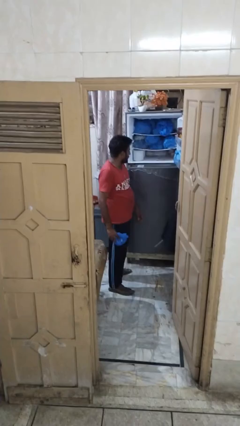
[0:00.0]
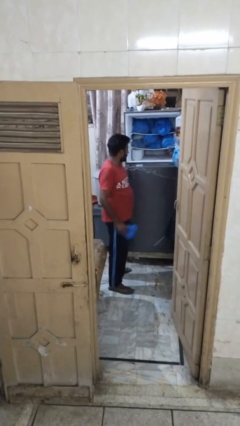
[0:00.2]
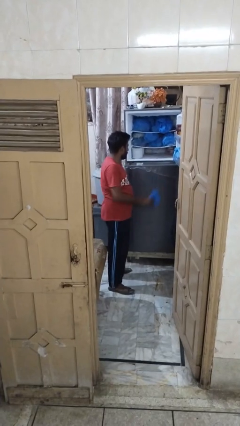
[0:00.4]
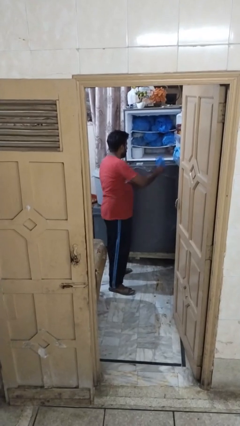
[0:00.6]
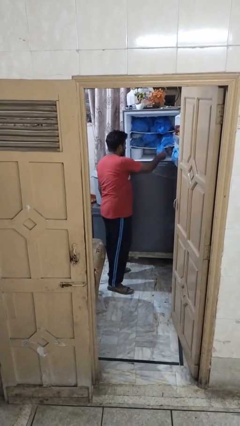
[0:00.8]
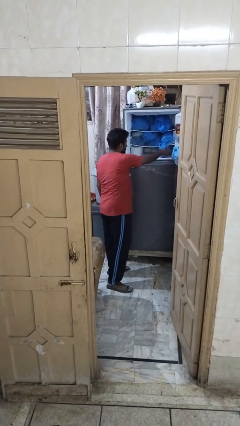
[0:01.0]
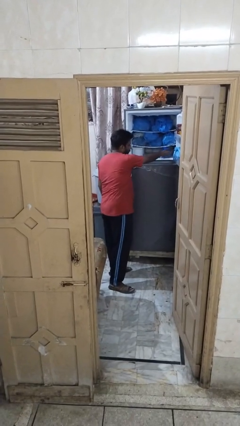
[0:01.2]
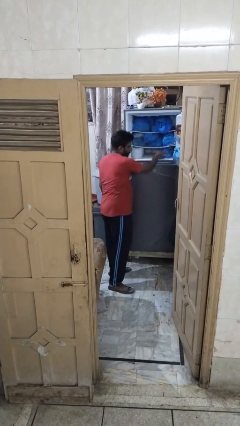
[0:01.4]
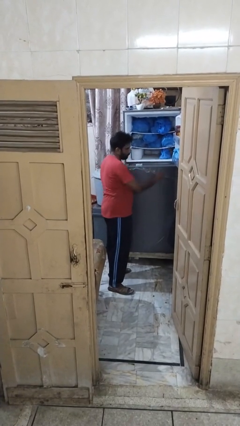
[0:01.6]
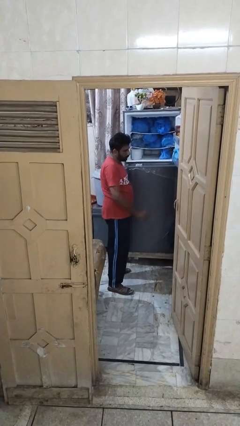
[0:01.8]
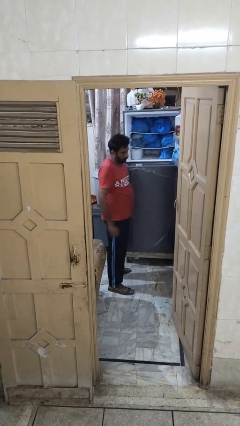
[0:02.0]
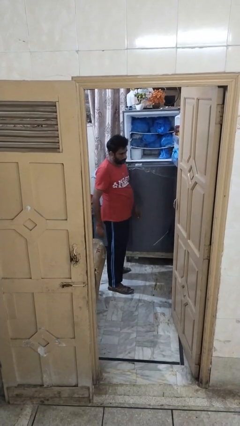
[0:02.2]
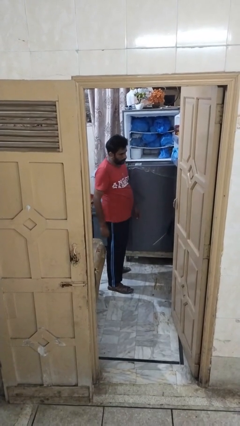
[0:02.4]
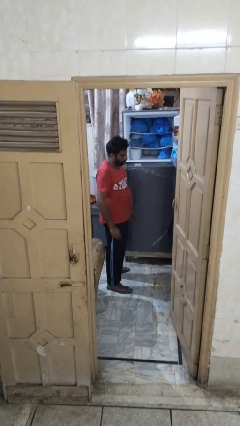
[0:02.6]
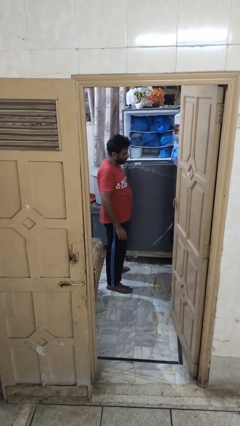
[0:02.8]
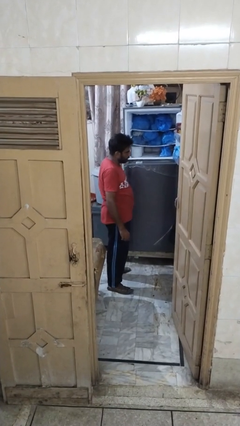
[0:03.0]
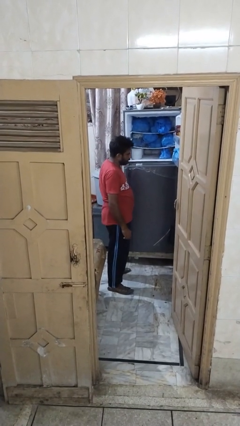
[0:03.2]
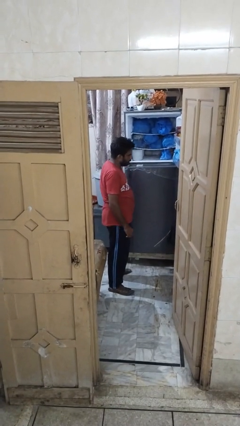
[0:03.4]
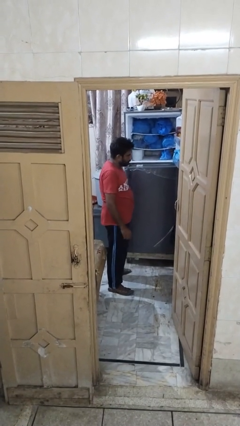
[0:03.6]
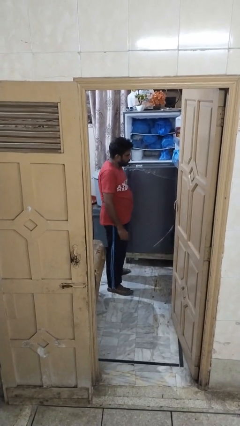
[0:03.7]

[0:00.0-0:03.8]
person loads groceries into refrigerator

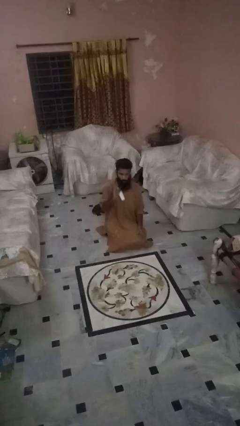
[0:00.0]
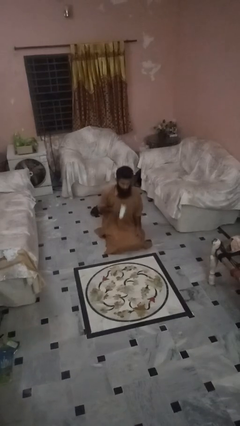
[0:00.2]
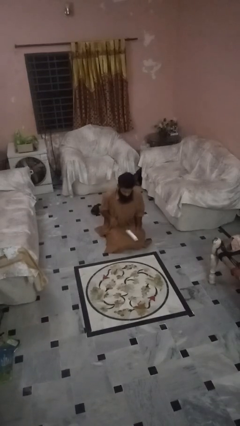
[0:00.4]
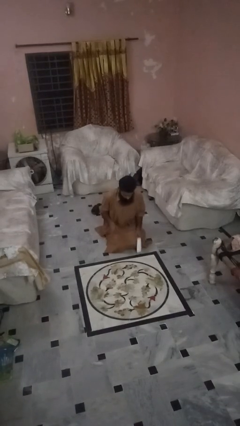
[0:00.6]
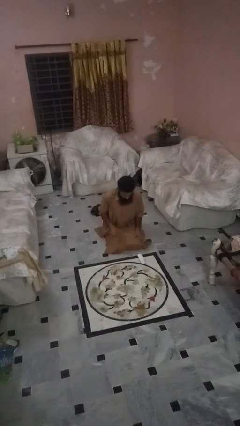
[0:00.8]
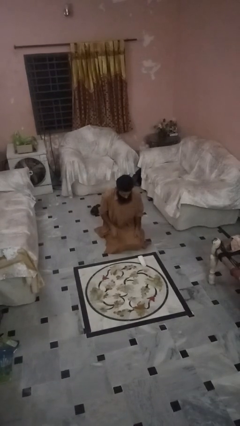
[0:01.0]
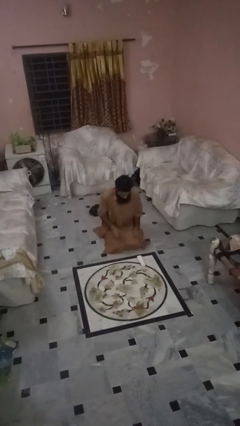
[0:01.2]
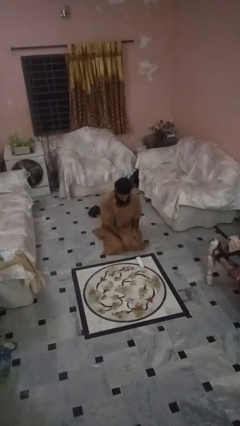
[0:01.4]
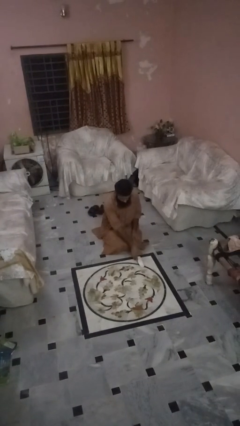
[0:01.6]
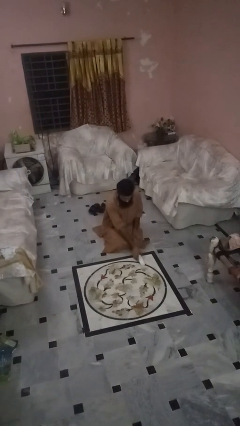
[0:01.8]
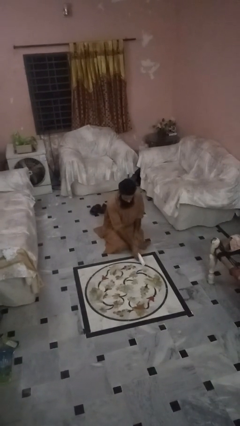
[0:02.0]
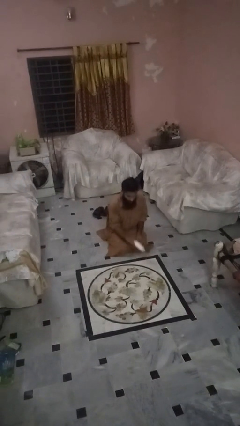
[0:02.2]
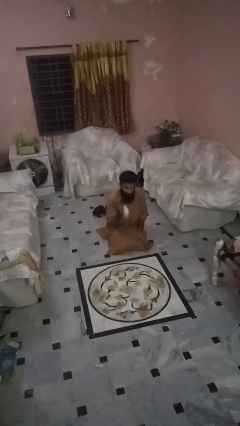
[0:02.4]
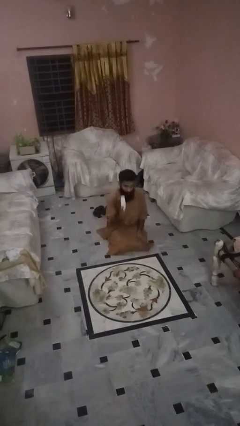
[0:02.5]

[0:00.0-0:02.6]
person catches dropped object

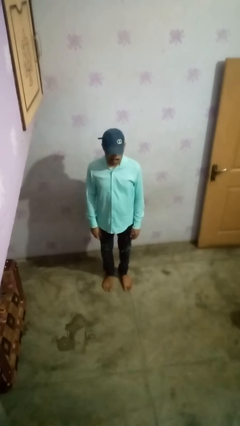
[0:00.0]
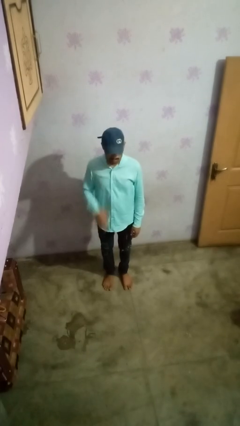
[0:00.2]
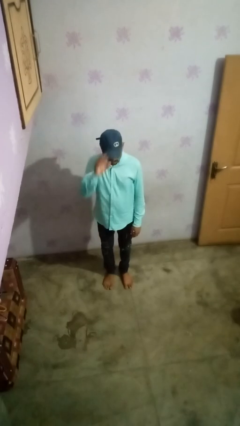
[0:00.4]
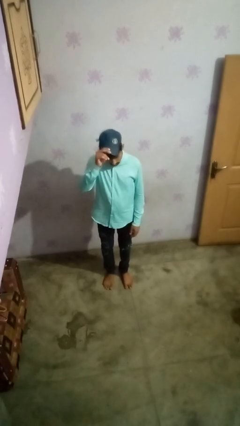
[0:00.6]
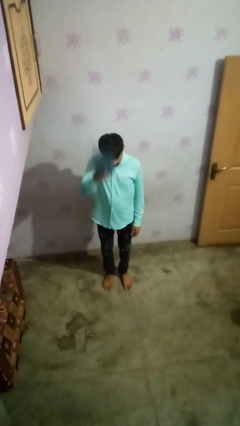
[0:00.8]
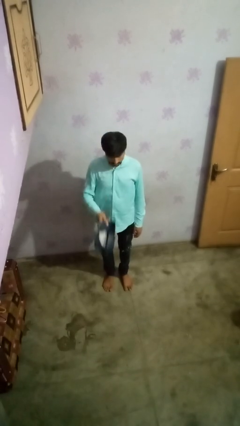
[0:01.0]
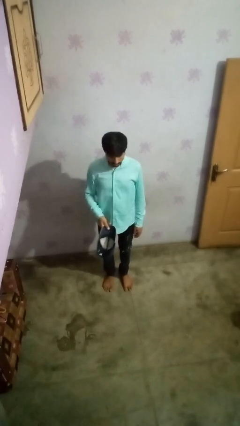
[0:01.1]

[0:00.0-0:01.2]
person takes off hat

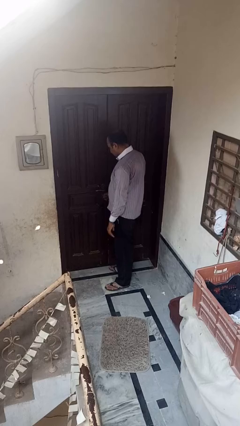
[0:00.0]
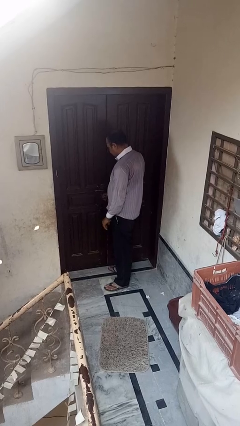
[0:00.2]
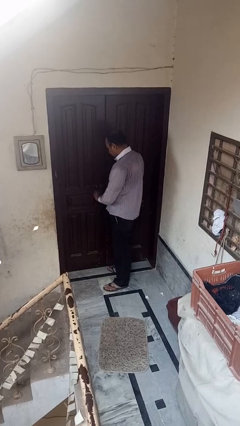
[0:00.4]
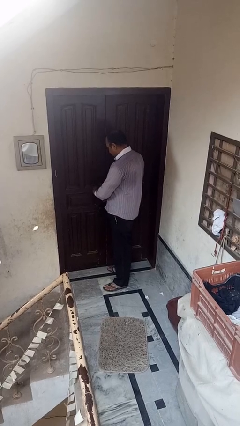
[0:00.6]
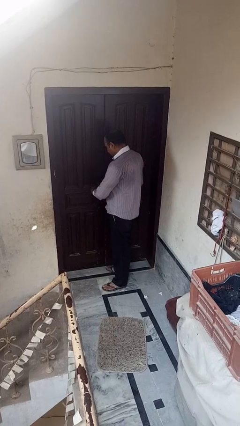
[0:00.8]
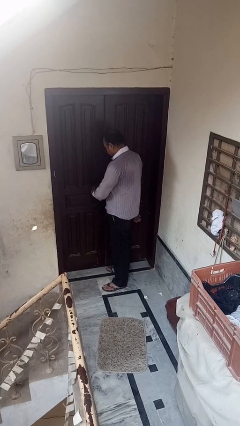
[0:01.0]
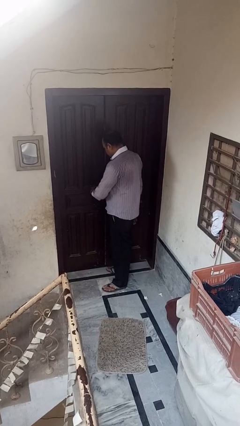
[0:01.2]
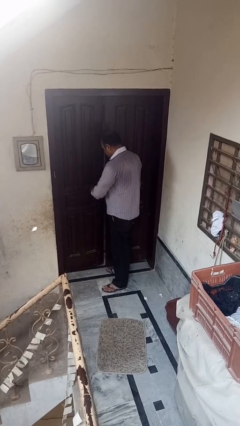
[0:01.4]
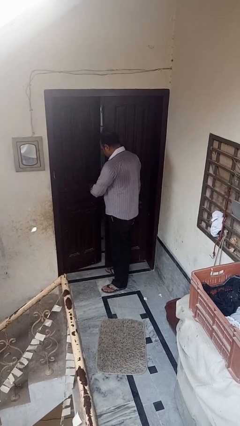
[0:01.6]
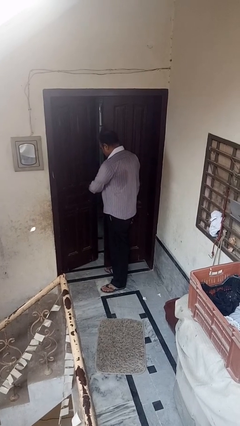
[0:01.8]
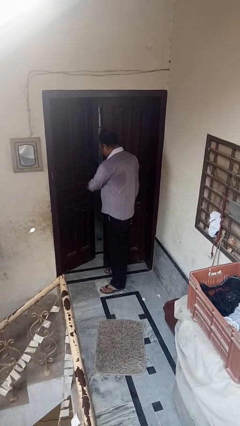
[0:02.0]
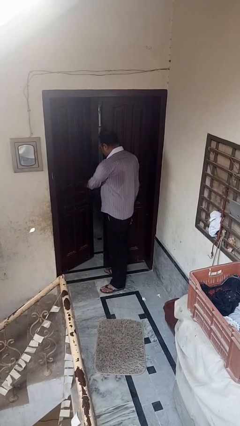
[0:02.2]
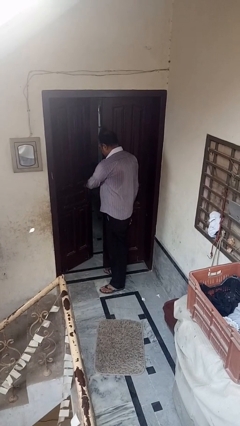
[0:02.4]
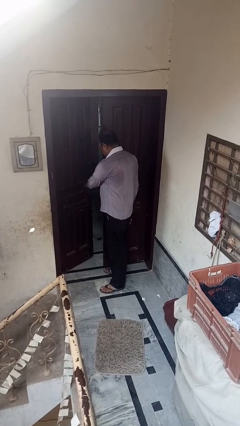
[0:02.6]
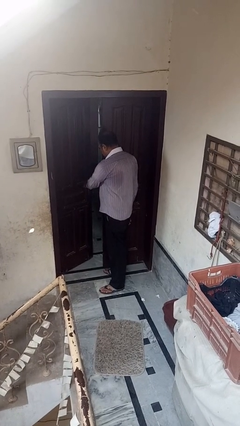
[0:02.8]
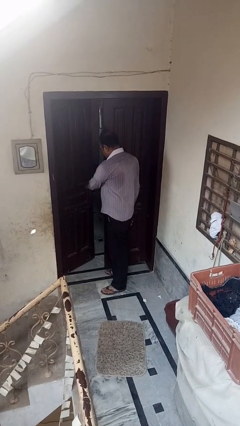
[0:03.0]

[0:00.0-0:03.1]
person opens facility door

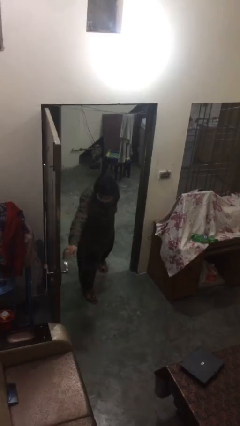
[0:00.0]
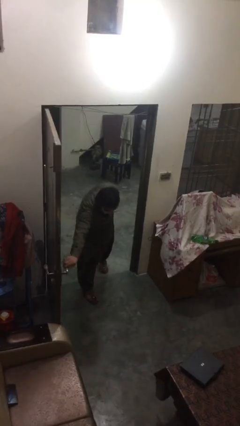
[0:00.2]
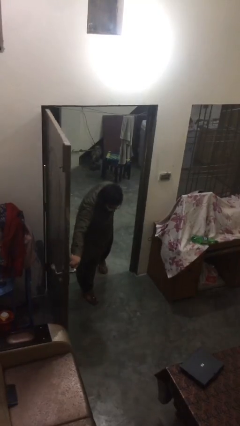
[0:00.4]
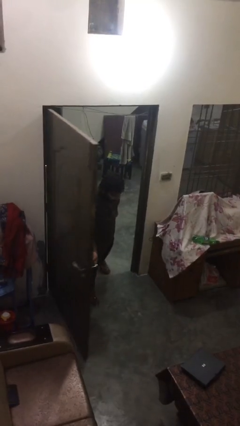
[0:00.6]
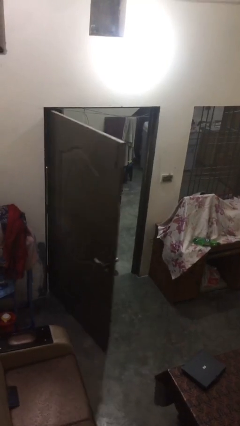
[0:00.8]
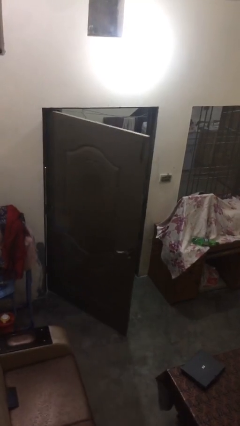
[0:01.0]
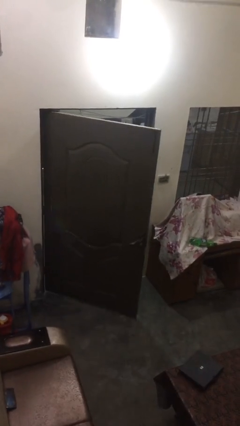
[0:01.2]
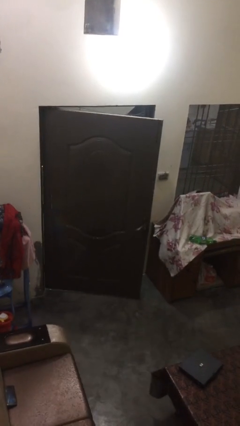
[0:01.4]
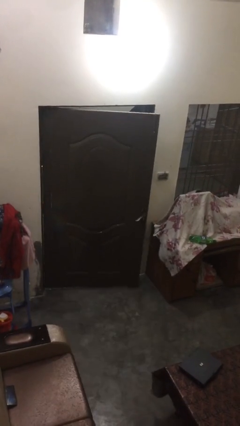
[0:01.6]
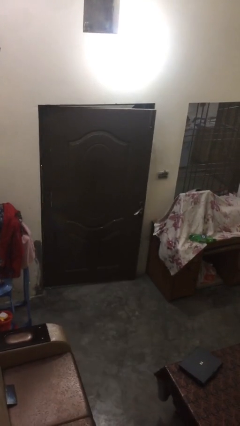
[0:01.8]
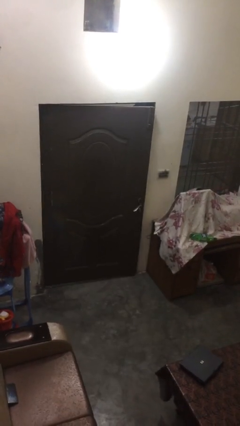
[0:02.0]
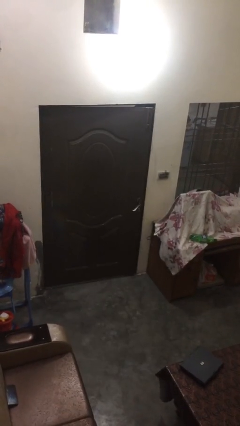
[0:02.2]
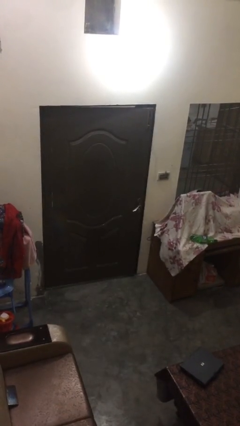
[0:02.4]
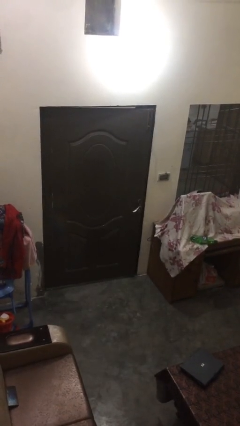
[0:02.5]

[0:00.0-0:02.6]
person closes facility door

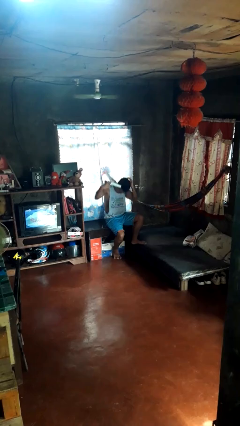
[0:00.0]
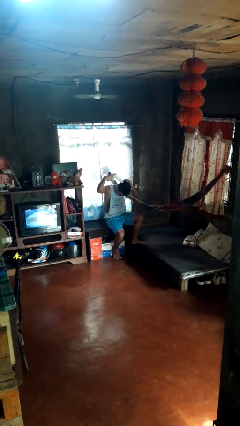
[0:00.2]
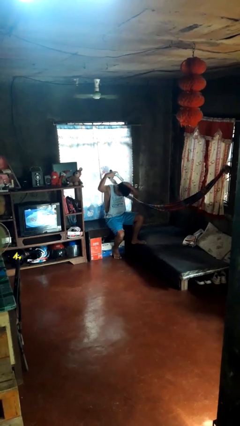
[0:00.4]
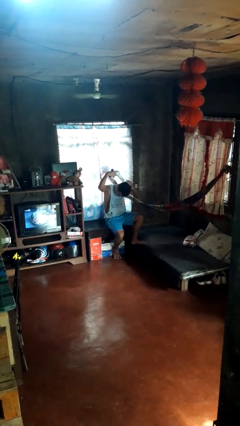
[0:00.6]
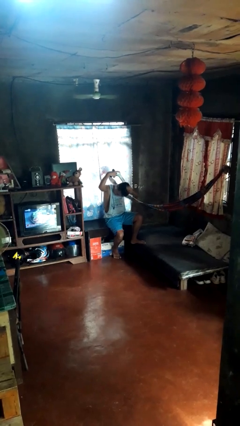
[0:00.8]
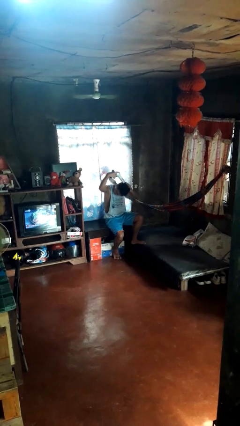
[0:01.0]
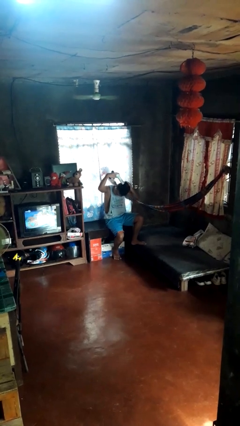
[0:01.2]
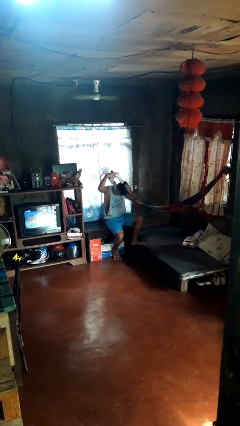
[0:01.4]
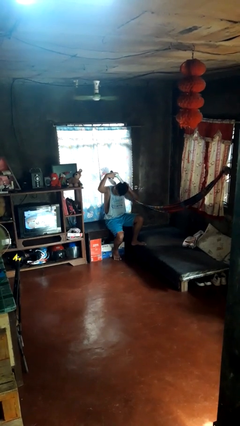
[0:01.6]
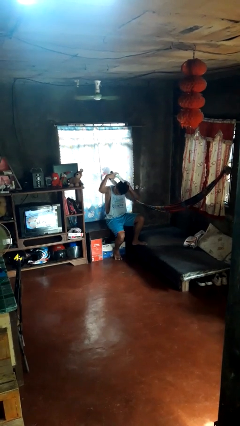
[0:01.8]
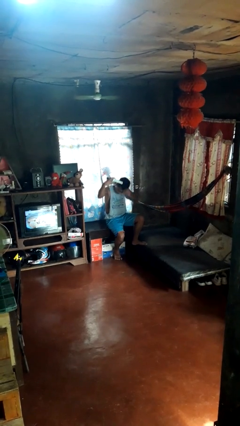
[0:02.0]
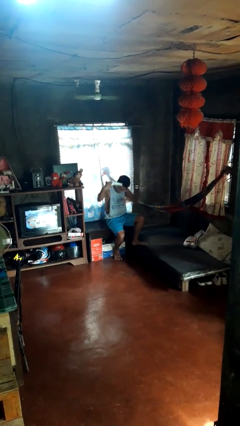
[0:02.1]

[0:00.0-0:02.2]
person dries hair with hairdryer

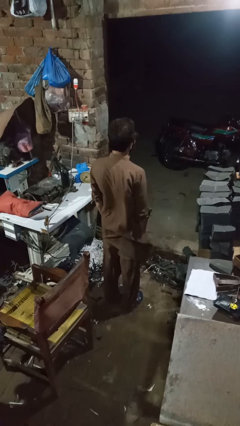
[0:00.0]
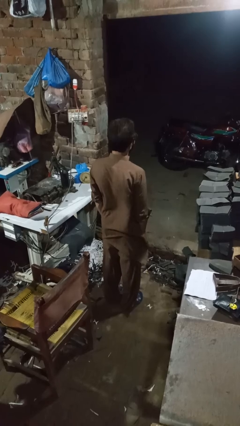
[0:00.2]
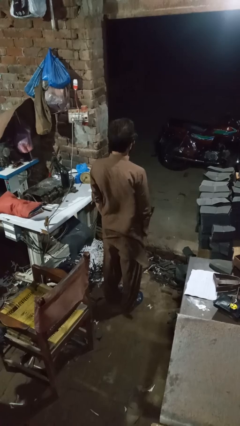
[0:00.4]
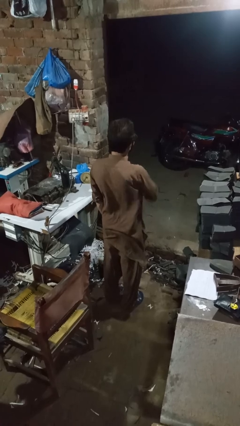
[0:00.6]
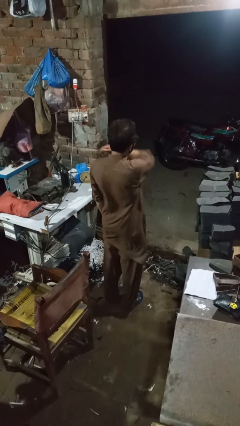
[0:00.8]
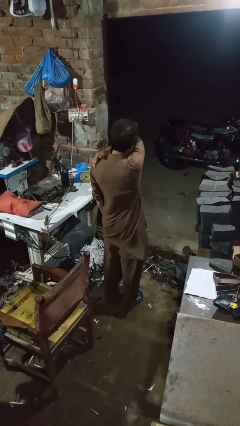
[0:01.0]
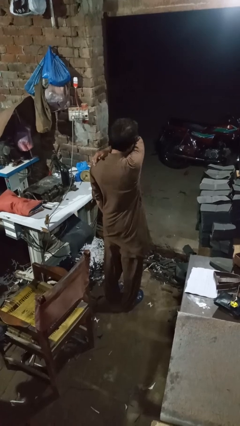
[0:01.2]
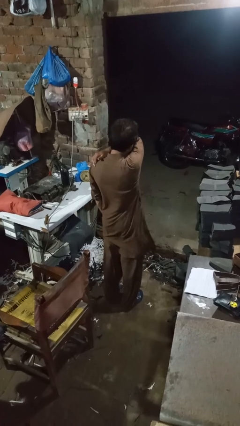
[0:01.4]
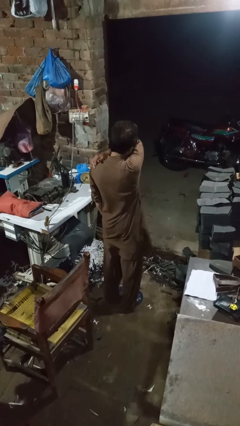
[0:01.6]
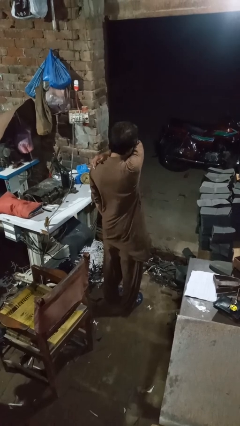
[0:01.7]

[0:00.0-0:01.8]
person sneezes into arm

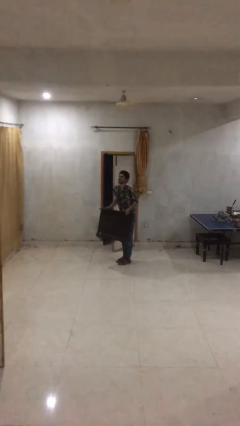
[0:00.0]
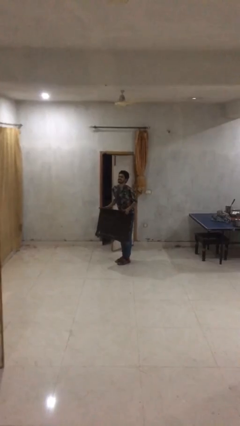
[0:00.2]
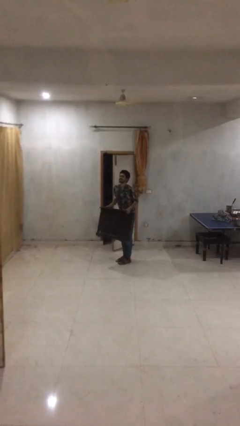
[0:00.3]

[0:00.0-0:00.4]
person carries heavy object
